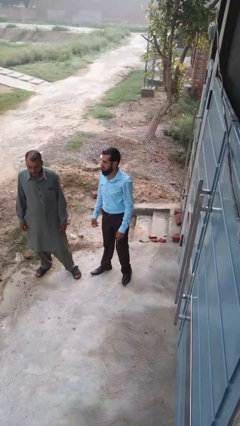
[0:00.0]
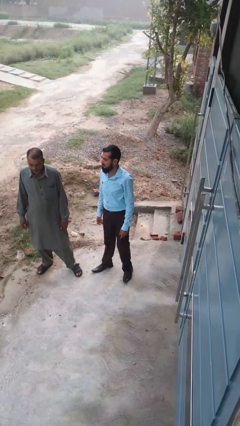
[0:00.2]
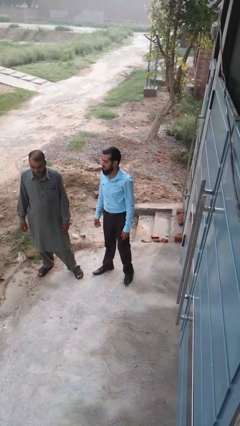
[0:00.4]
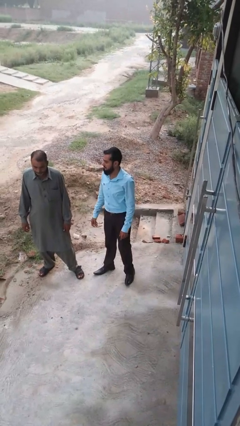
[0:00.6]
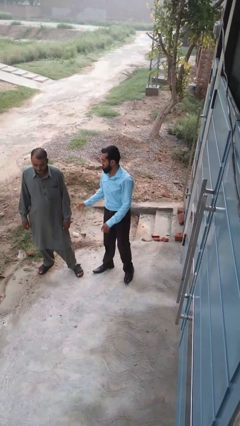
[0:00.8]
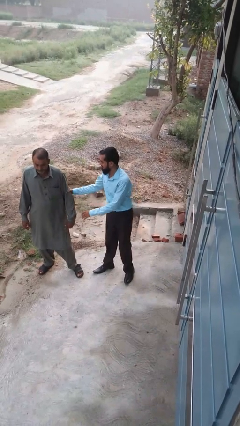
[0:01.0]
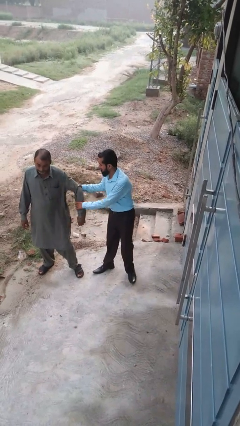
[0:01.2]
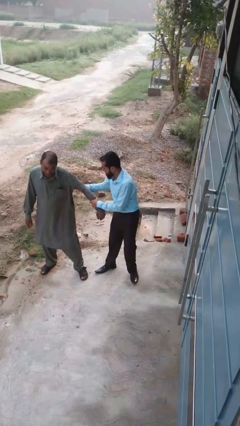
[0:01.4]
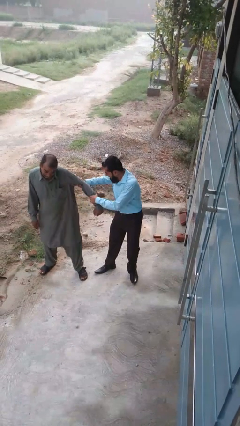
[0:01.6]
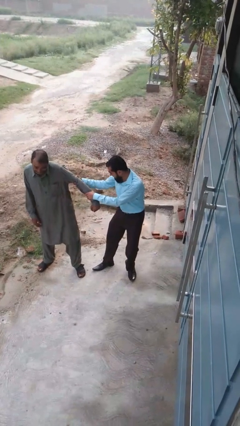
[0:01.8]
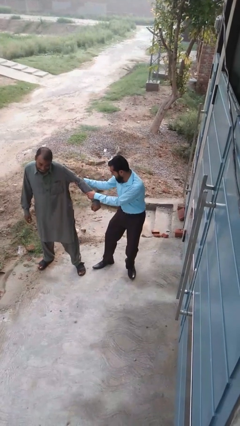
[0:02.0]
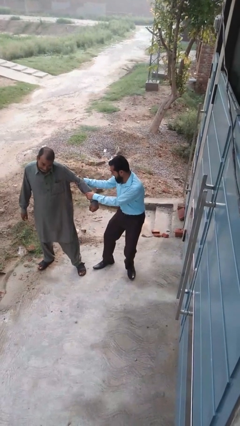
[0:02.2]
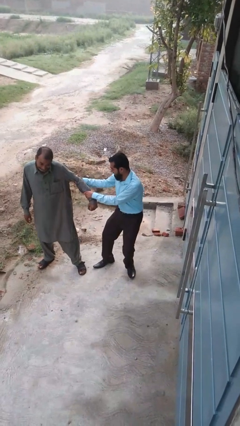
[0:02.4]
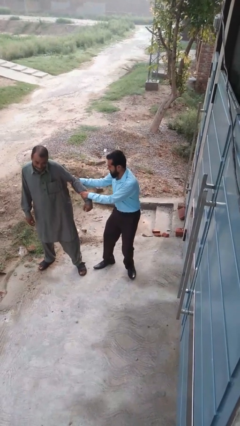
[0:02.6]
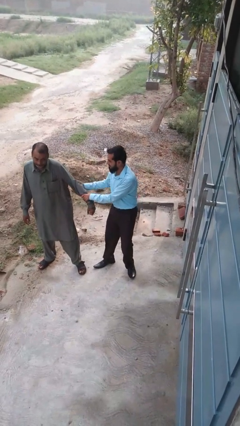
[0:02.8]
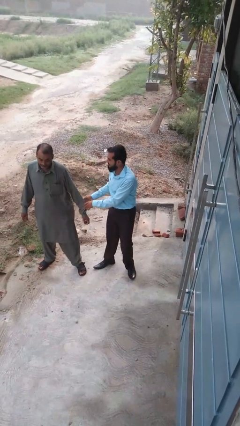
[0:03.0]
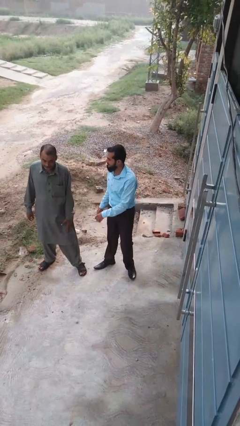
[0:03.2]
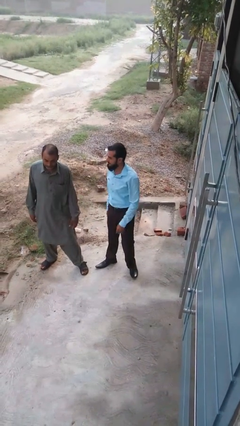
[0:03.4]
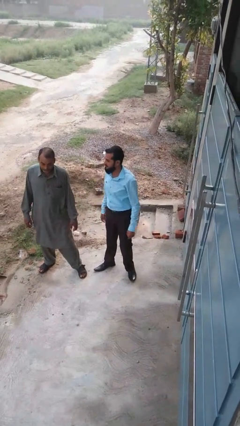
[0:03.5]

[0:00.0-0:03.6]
person grabs person by forearm

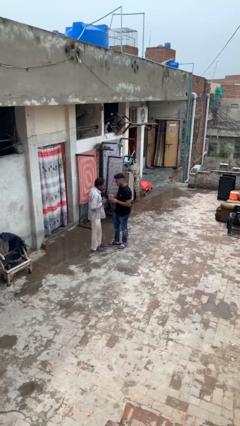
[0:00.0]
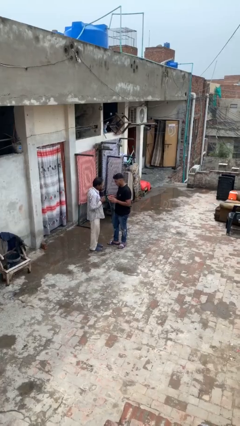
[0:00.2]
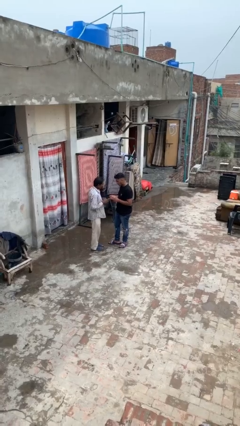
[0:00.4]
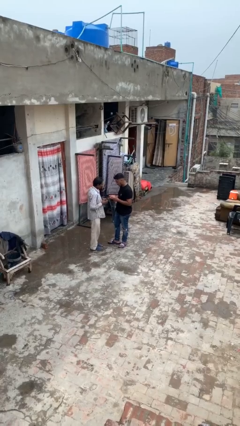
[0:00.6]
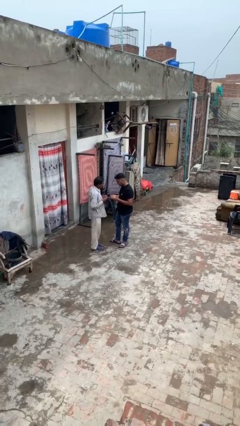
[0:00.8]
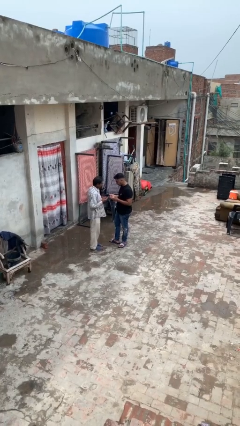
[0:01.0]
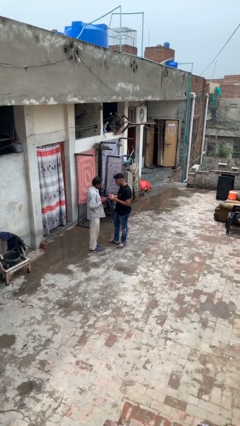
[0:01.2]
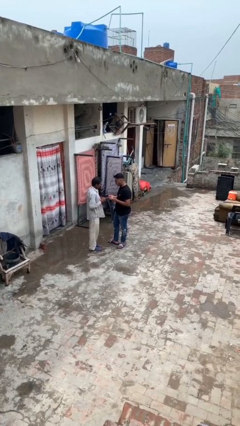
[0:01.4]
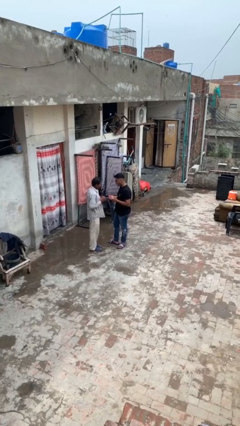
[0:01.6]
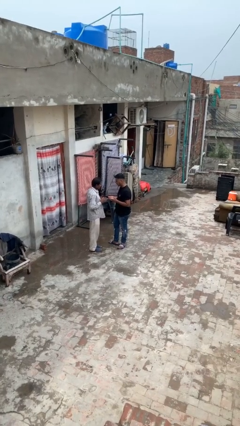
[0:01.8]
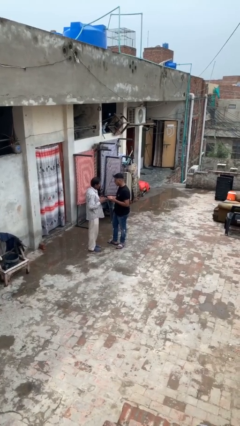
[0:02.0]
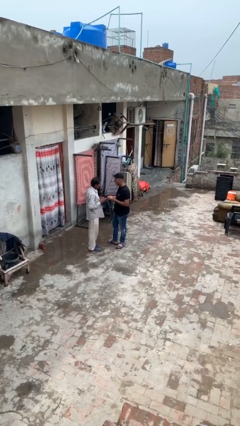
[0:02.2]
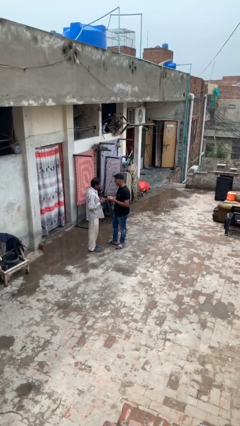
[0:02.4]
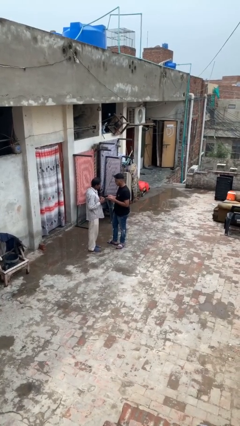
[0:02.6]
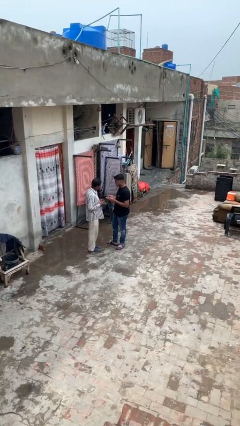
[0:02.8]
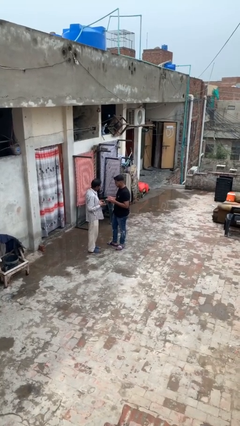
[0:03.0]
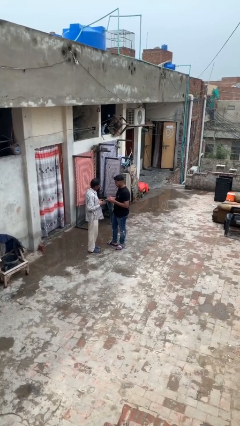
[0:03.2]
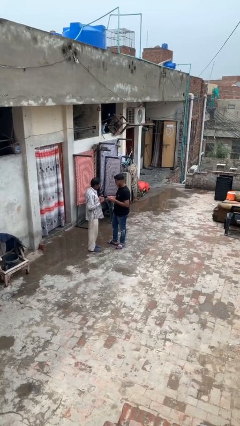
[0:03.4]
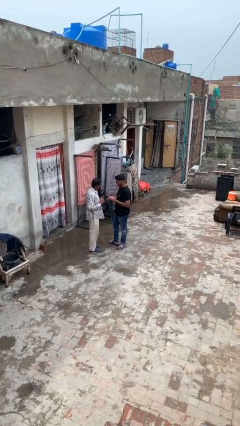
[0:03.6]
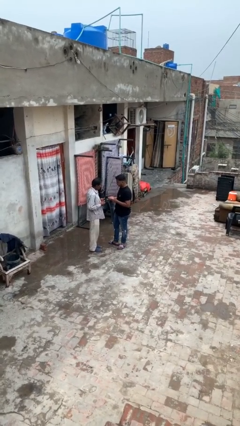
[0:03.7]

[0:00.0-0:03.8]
person talks to person

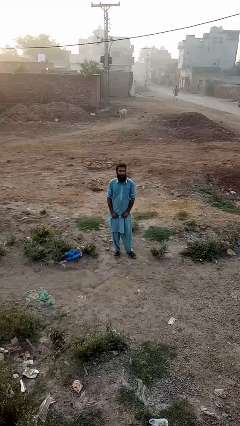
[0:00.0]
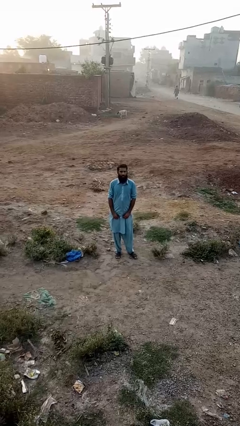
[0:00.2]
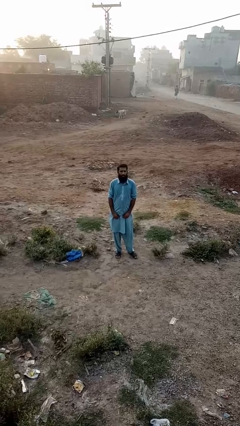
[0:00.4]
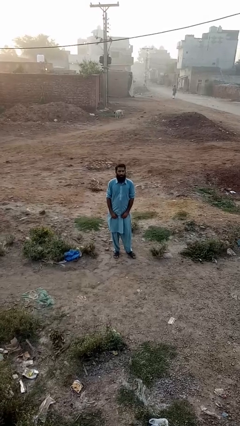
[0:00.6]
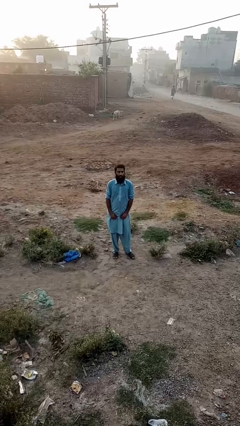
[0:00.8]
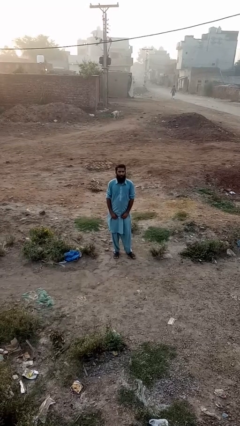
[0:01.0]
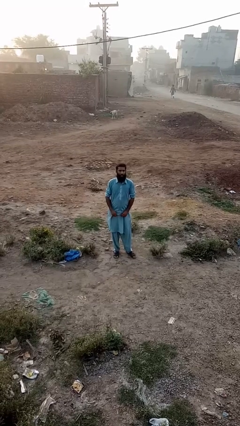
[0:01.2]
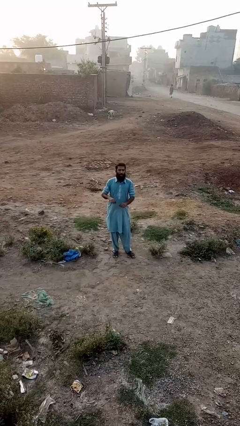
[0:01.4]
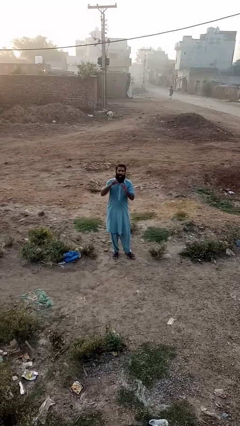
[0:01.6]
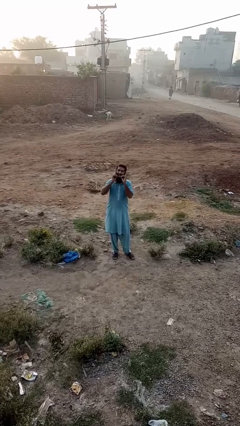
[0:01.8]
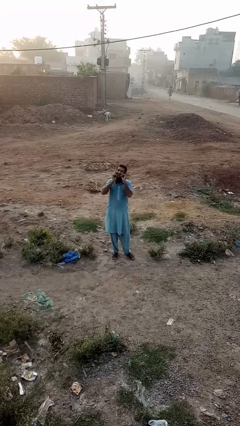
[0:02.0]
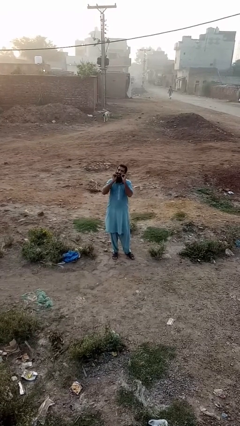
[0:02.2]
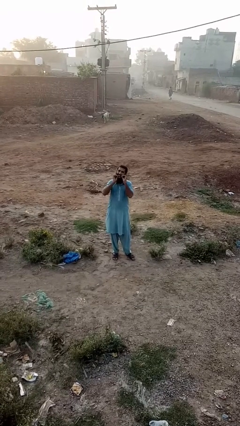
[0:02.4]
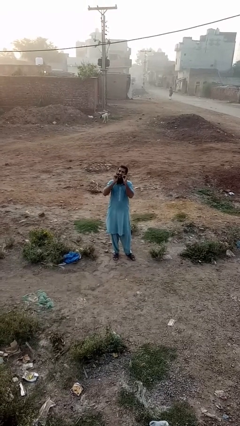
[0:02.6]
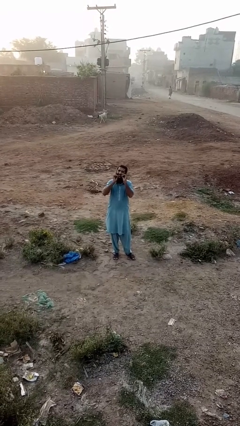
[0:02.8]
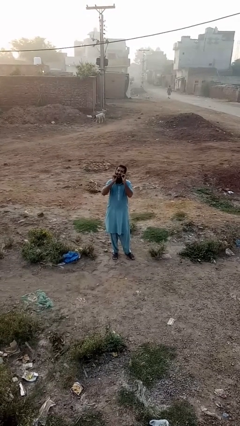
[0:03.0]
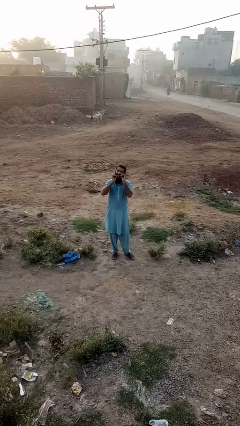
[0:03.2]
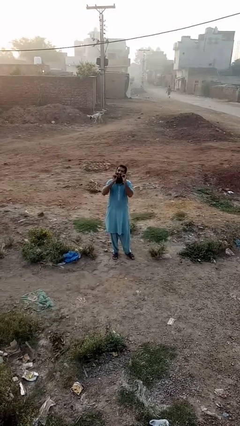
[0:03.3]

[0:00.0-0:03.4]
person flosses

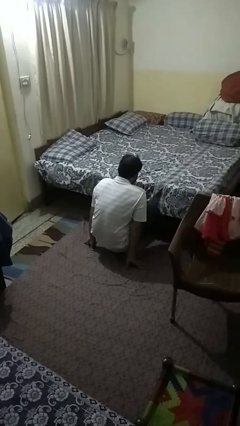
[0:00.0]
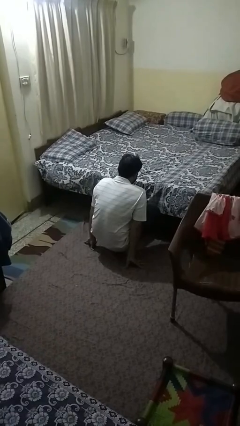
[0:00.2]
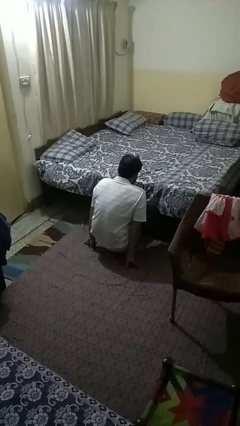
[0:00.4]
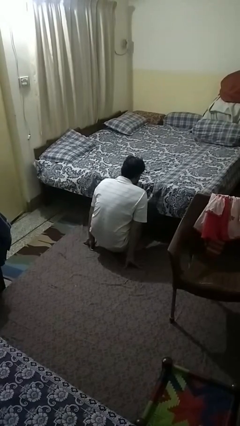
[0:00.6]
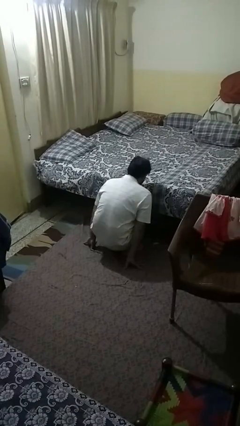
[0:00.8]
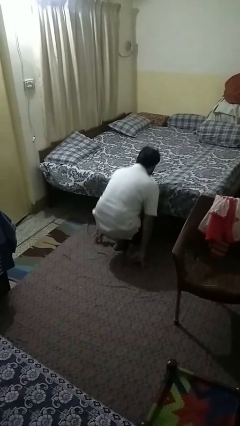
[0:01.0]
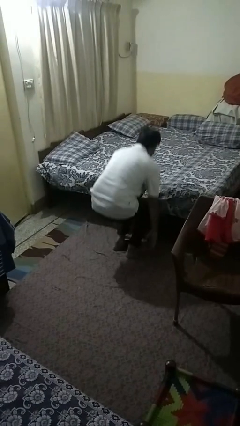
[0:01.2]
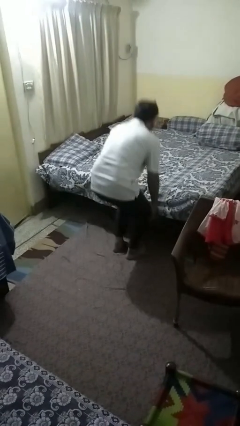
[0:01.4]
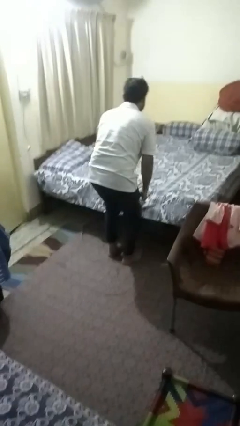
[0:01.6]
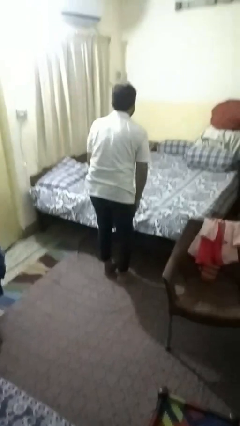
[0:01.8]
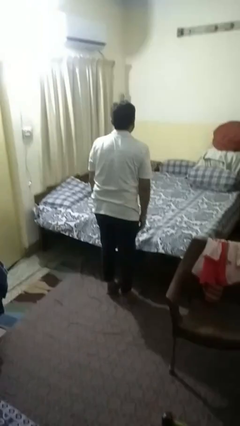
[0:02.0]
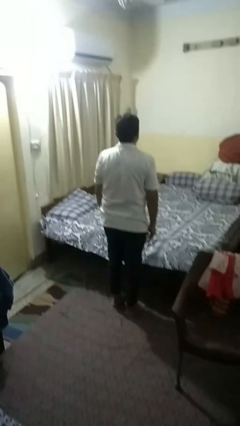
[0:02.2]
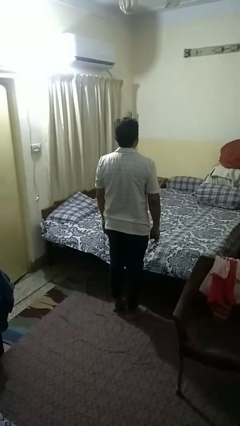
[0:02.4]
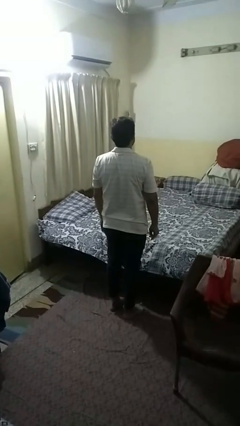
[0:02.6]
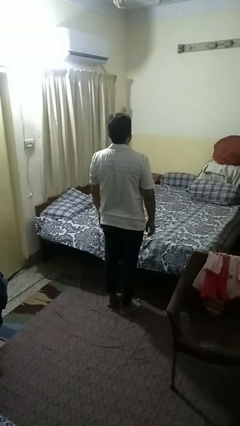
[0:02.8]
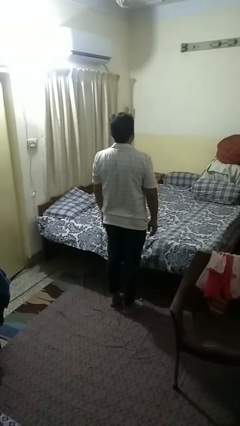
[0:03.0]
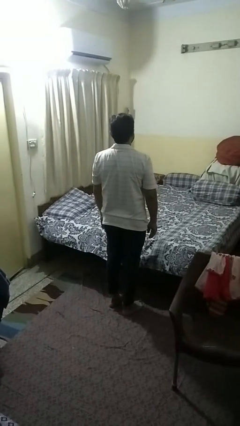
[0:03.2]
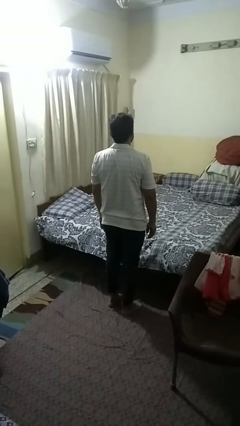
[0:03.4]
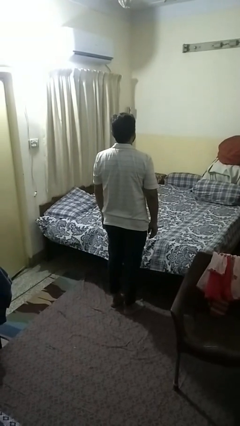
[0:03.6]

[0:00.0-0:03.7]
person stands up from floor

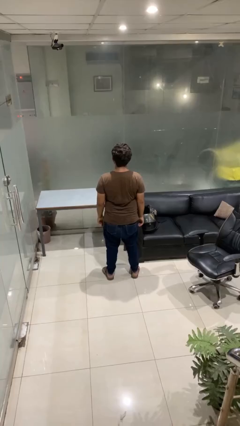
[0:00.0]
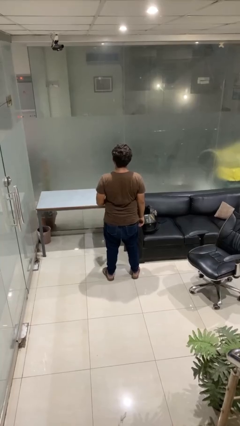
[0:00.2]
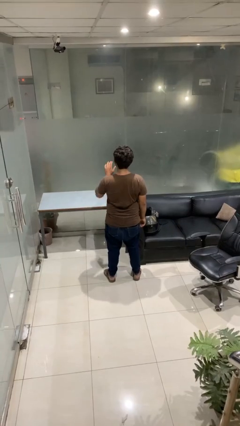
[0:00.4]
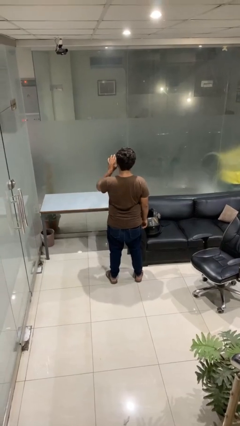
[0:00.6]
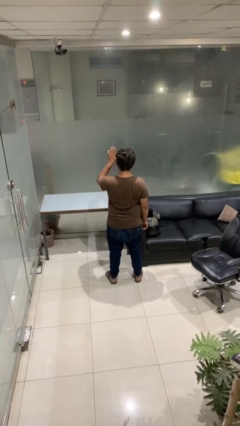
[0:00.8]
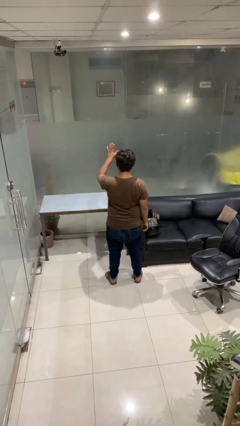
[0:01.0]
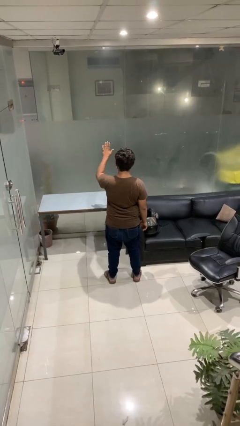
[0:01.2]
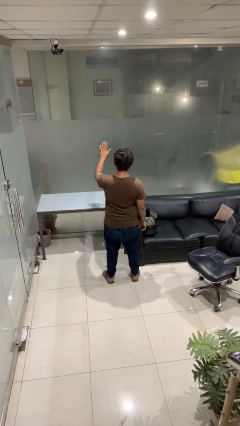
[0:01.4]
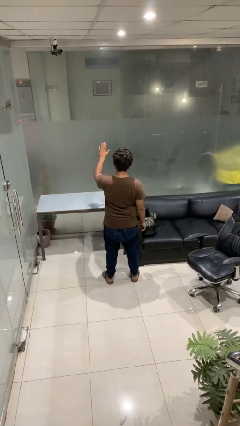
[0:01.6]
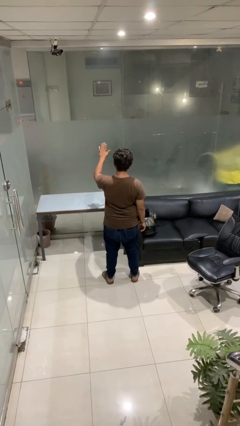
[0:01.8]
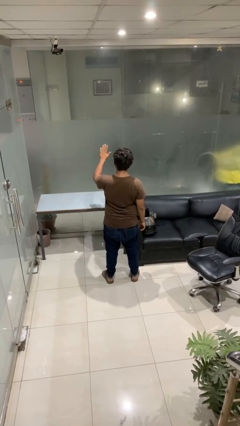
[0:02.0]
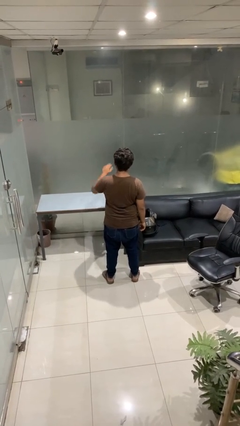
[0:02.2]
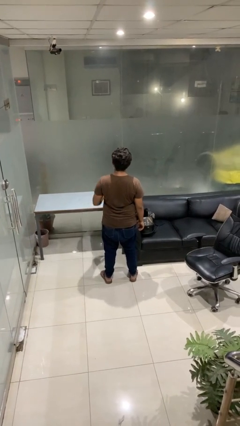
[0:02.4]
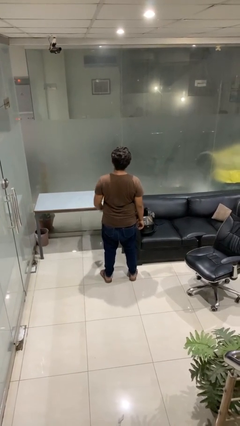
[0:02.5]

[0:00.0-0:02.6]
person gestures stop

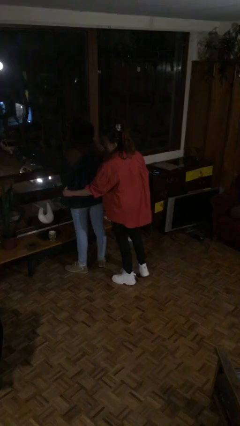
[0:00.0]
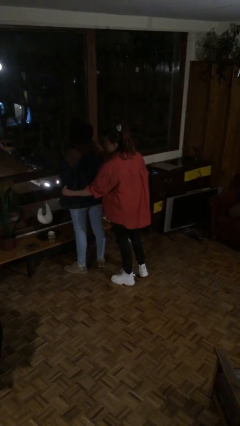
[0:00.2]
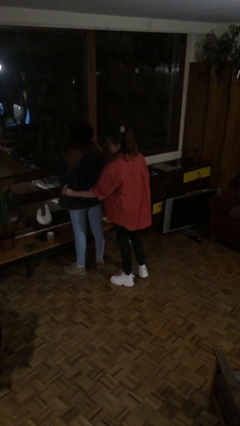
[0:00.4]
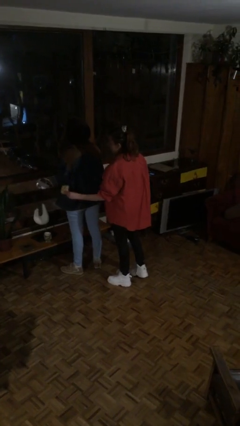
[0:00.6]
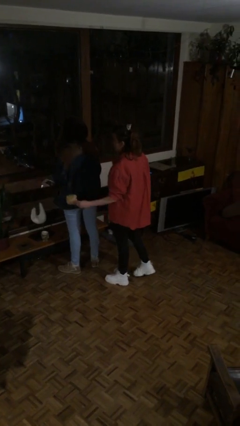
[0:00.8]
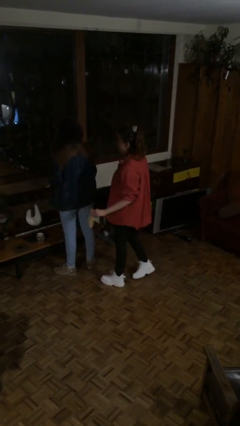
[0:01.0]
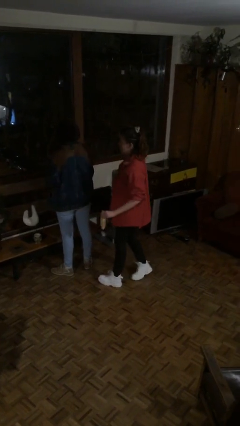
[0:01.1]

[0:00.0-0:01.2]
person steals object from person
